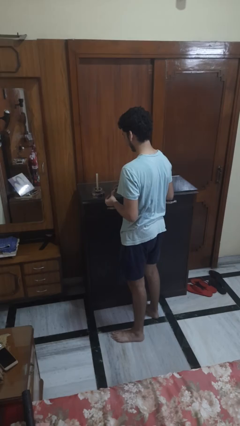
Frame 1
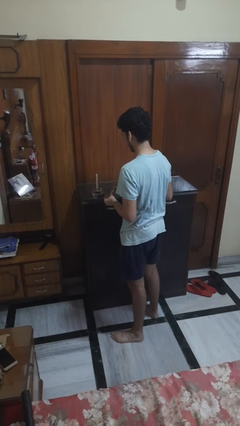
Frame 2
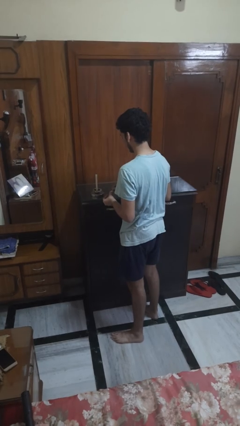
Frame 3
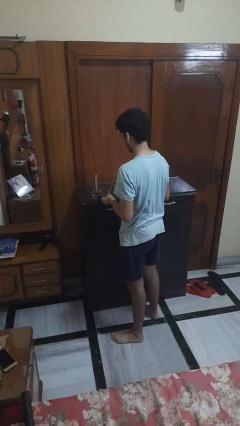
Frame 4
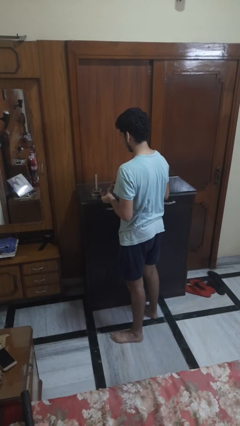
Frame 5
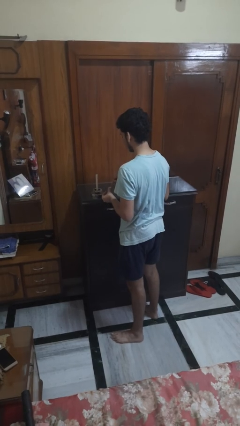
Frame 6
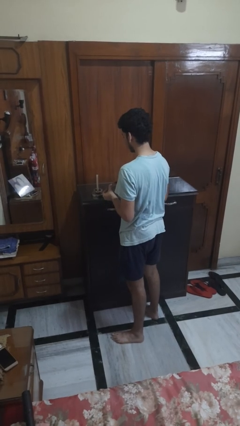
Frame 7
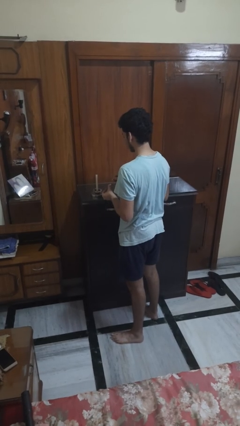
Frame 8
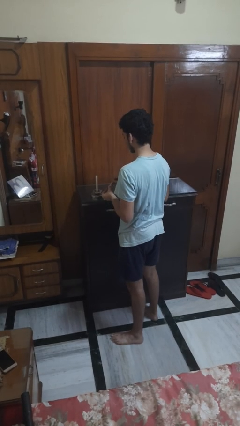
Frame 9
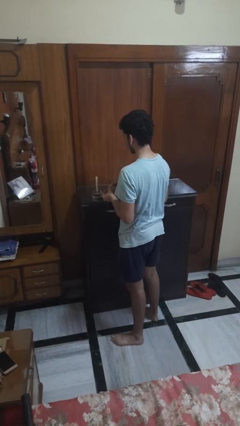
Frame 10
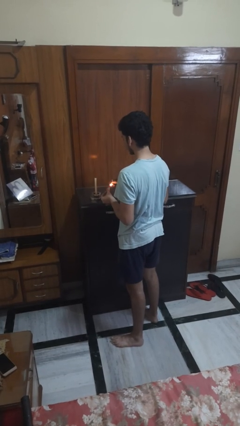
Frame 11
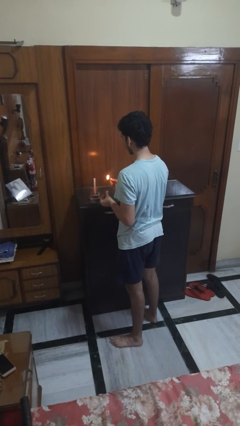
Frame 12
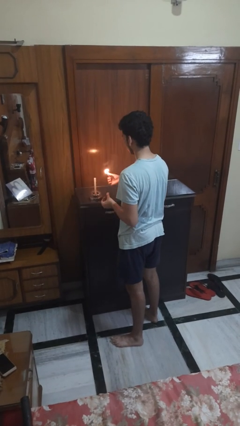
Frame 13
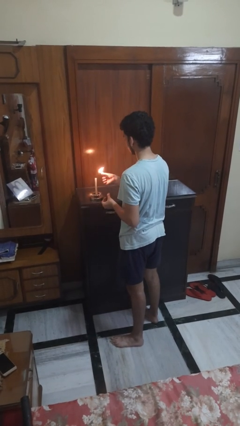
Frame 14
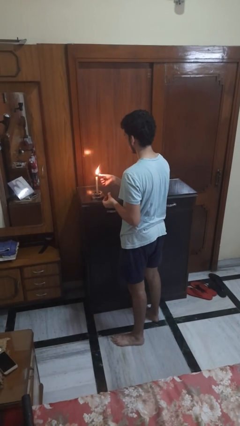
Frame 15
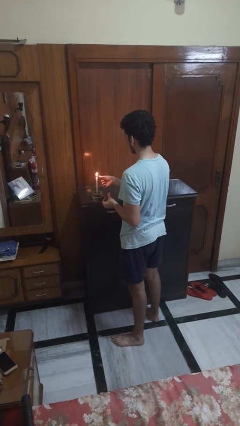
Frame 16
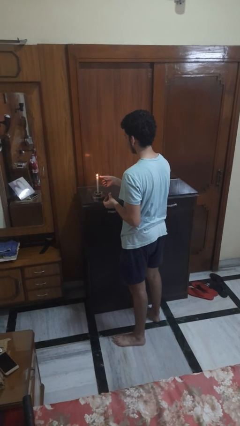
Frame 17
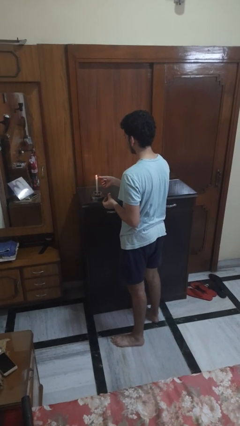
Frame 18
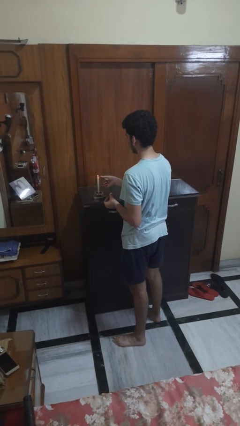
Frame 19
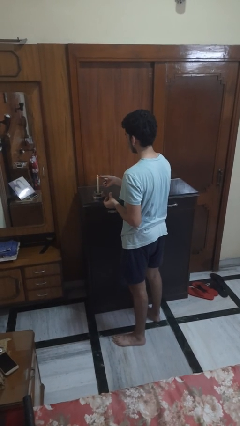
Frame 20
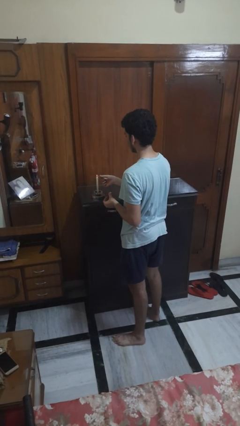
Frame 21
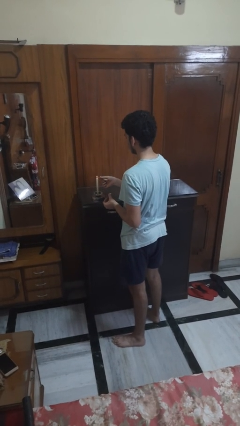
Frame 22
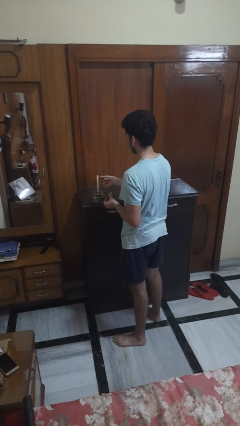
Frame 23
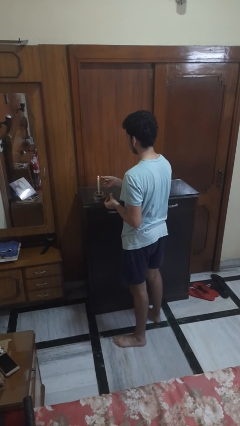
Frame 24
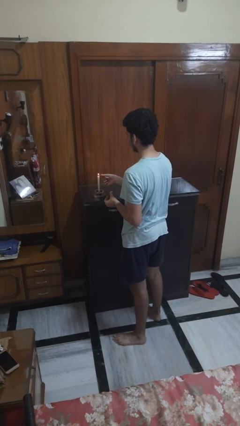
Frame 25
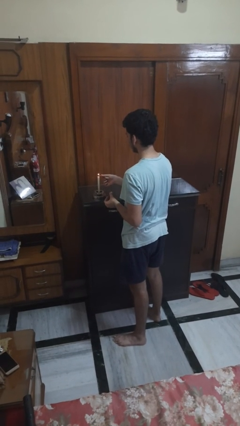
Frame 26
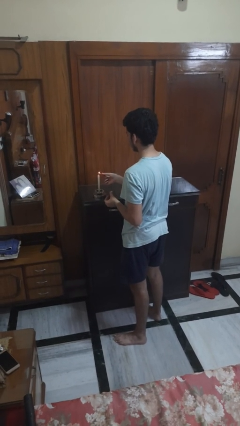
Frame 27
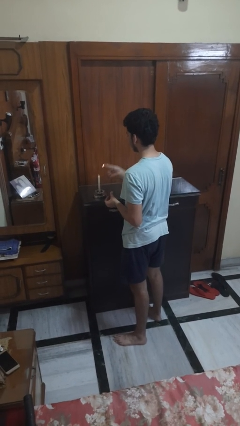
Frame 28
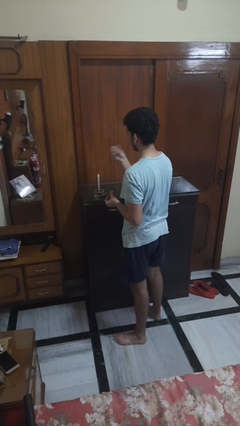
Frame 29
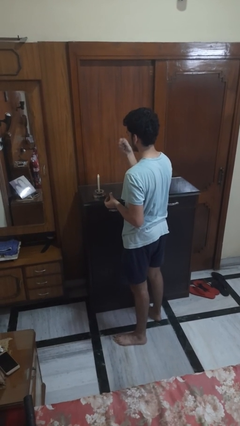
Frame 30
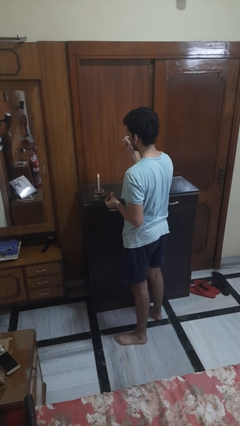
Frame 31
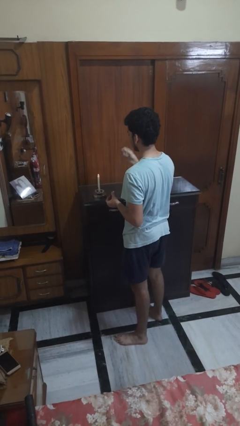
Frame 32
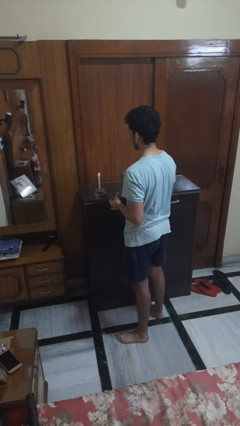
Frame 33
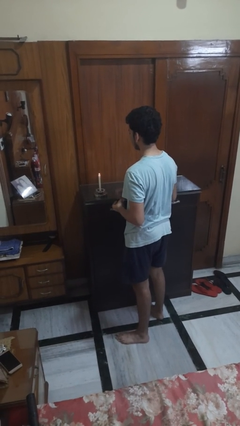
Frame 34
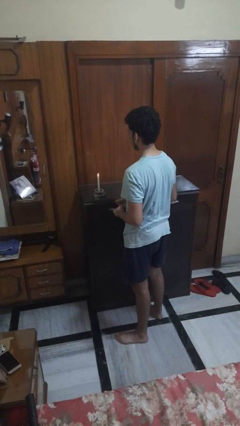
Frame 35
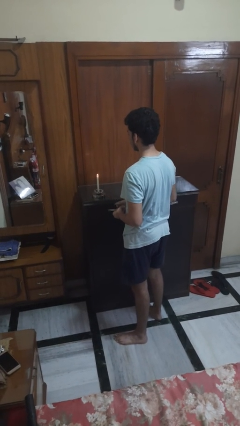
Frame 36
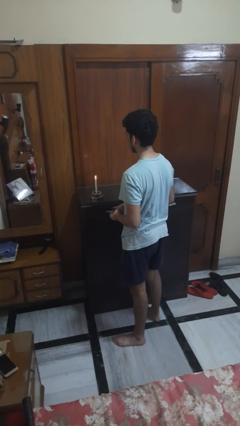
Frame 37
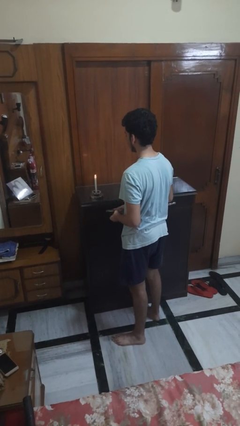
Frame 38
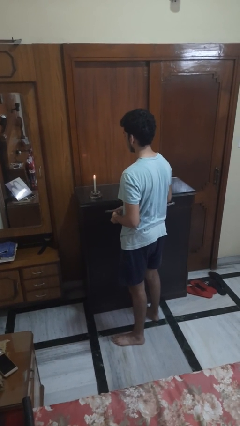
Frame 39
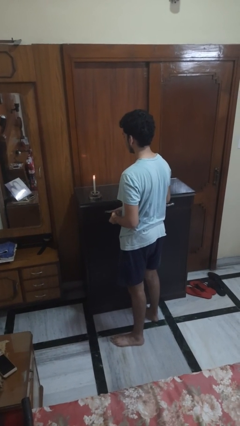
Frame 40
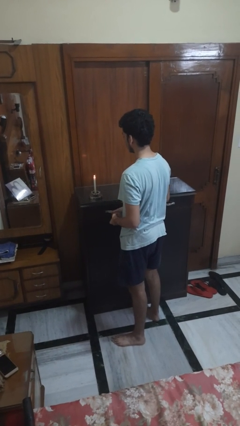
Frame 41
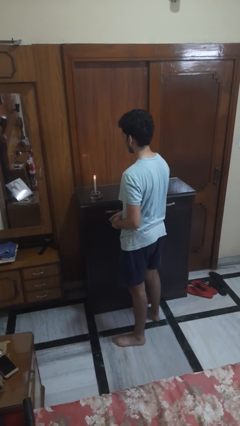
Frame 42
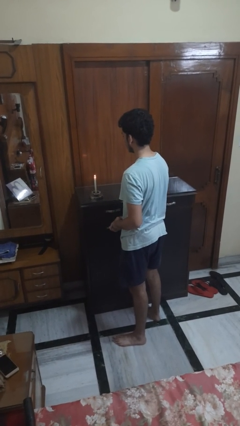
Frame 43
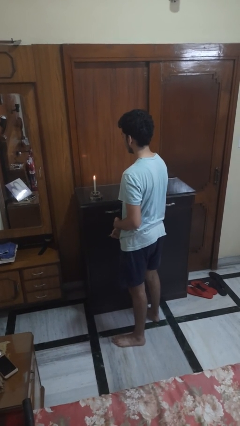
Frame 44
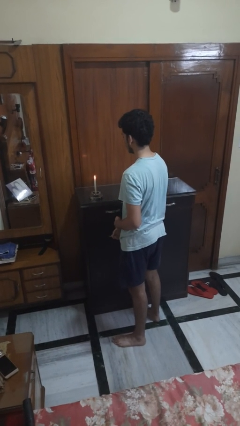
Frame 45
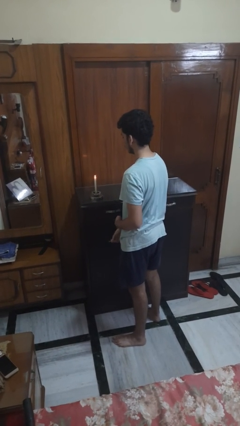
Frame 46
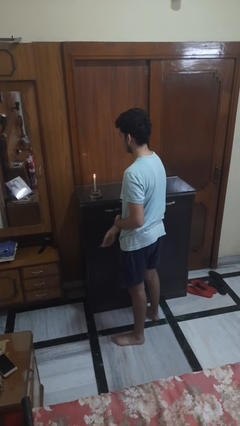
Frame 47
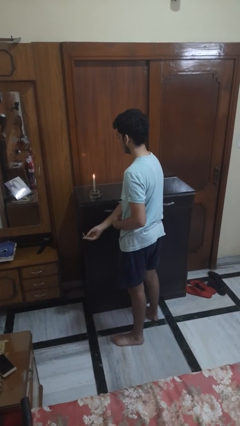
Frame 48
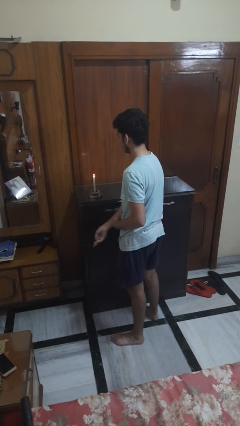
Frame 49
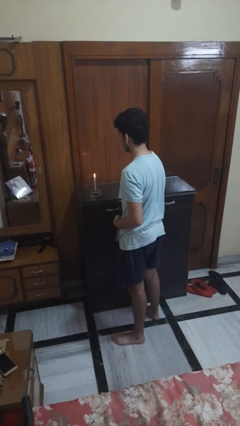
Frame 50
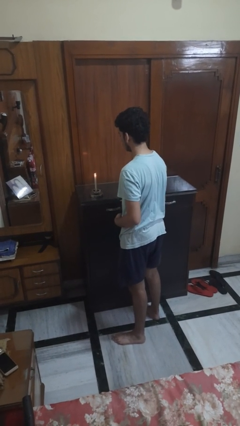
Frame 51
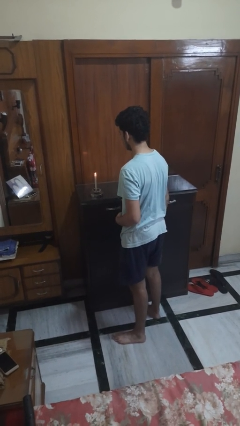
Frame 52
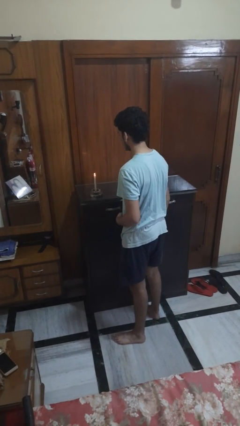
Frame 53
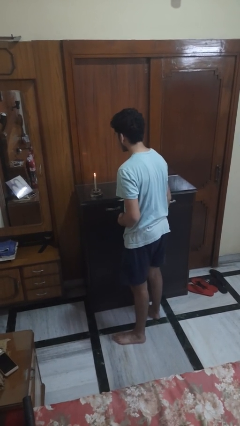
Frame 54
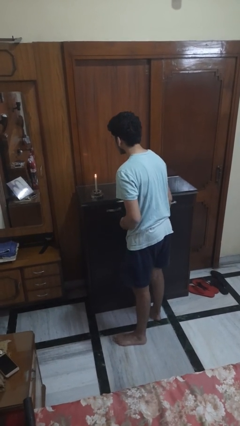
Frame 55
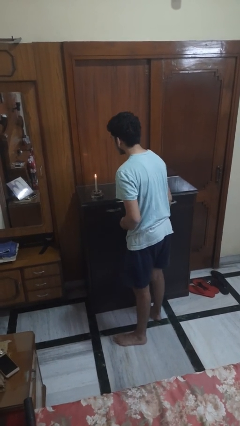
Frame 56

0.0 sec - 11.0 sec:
person lights candle

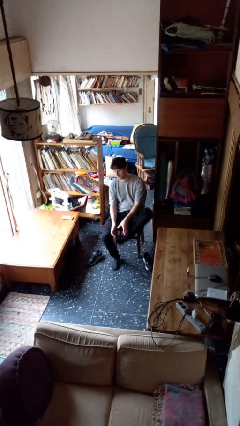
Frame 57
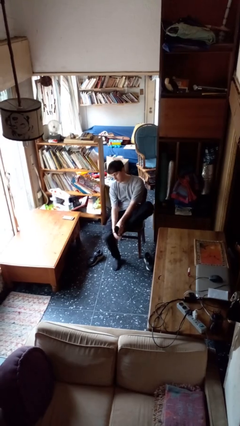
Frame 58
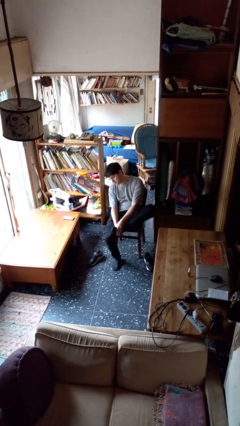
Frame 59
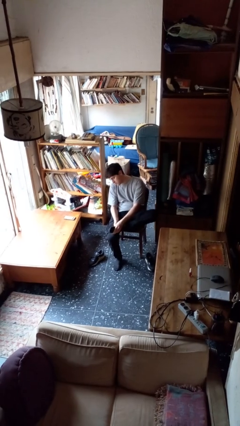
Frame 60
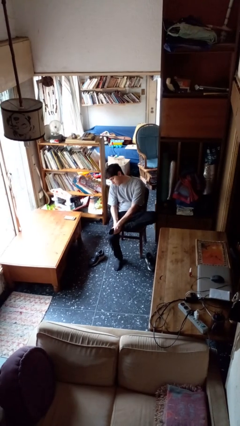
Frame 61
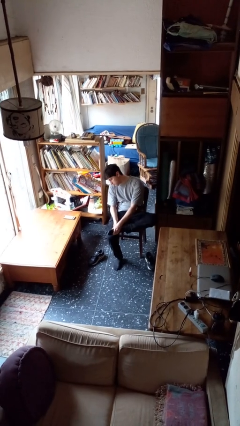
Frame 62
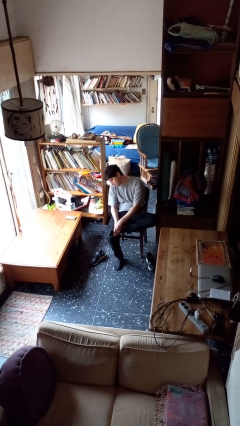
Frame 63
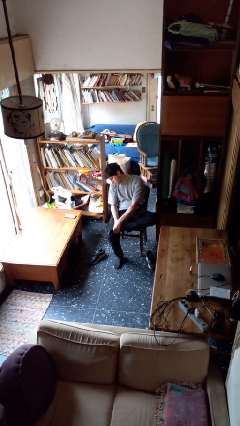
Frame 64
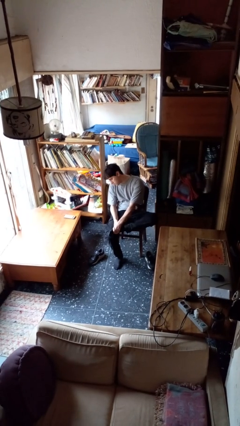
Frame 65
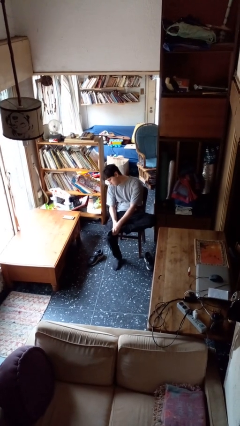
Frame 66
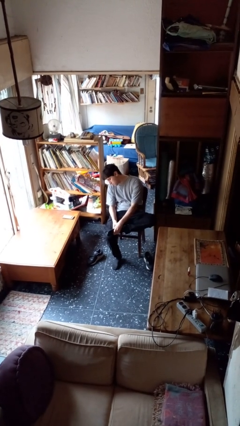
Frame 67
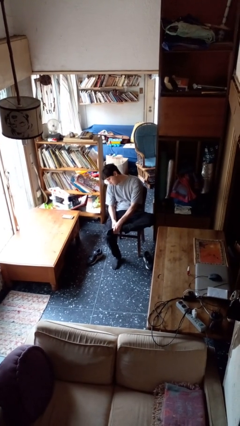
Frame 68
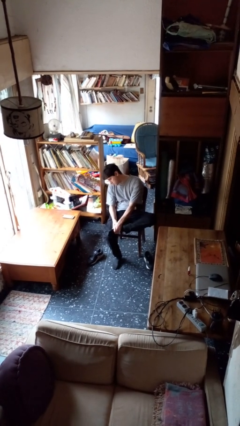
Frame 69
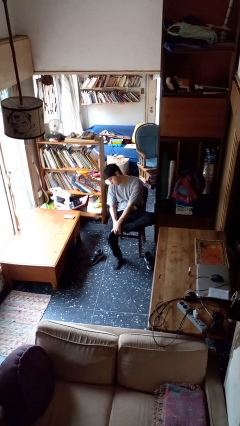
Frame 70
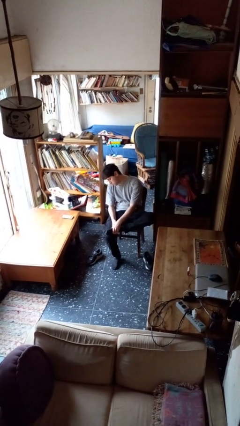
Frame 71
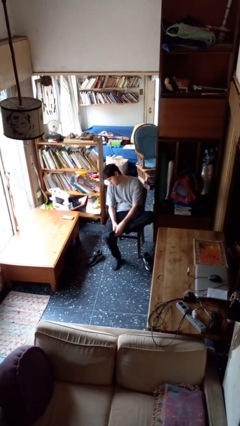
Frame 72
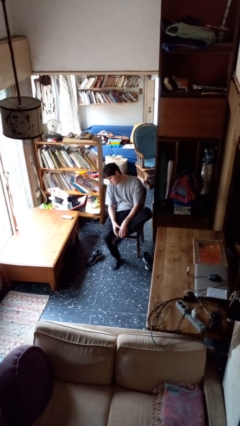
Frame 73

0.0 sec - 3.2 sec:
person rubs foot

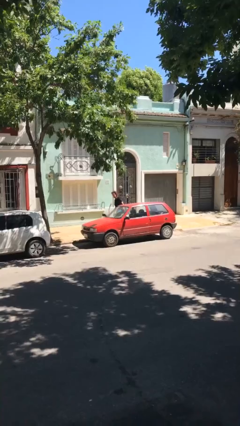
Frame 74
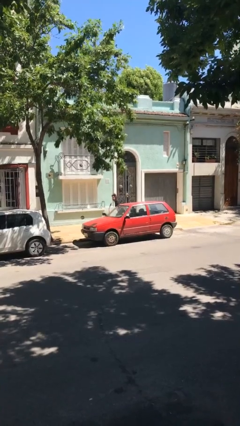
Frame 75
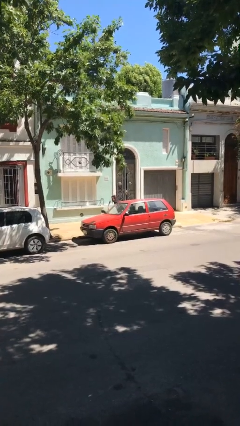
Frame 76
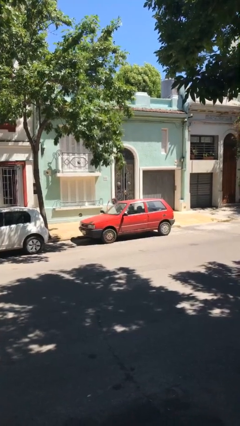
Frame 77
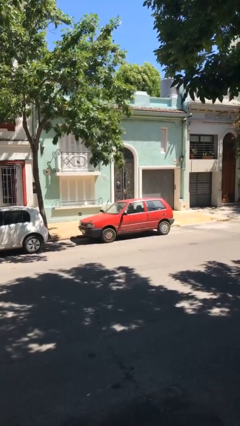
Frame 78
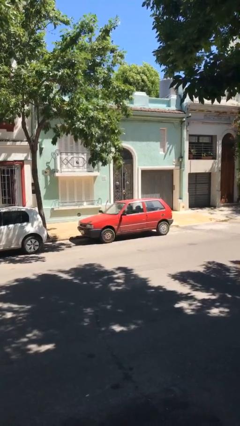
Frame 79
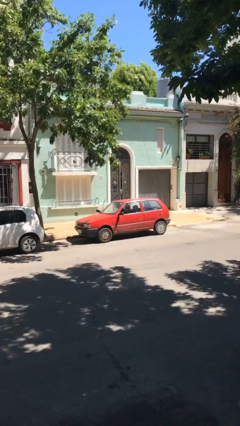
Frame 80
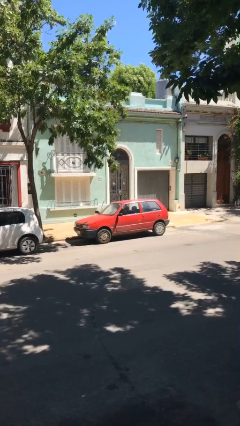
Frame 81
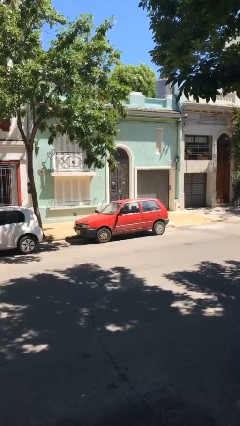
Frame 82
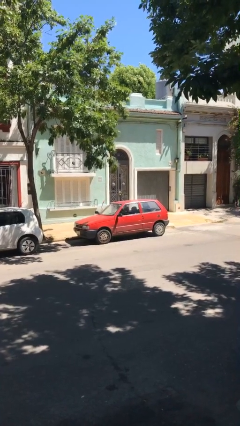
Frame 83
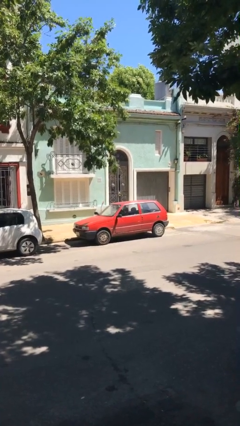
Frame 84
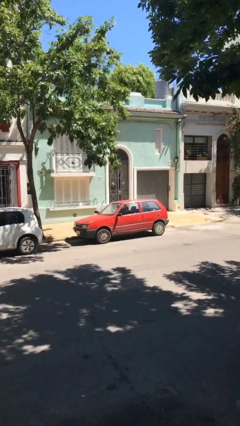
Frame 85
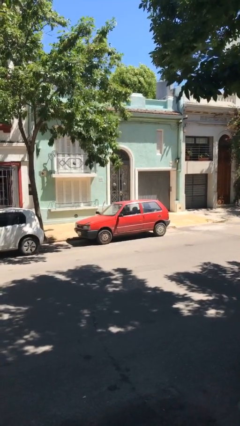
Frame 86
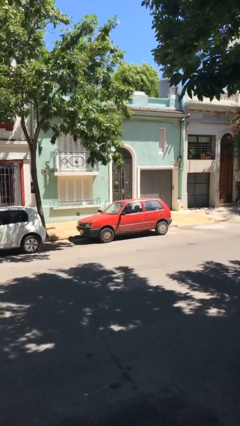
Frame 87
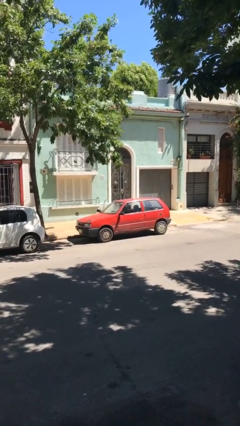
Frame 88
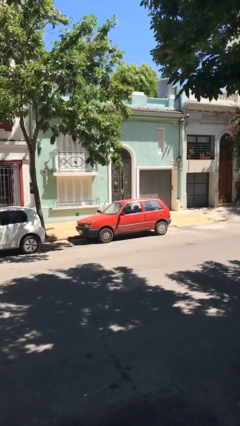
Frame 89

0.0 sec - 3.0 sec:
person enters car

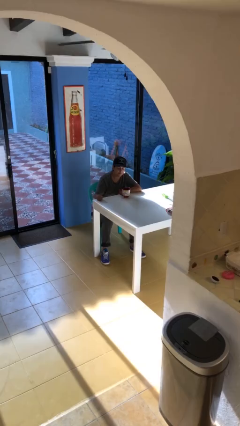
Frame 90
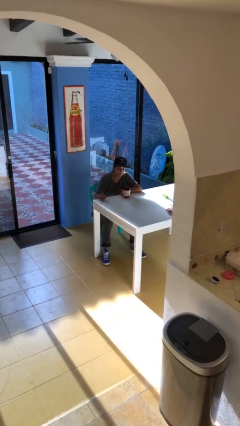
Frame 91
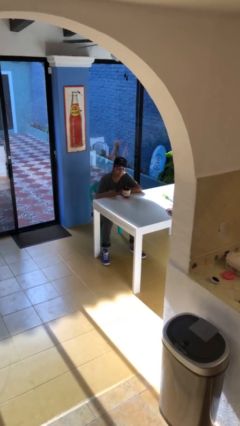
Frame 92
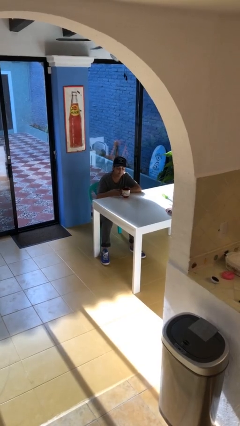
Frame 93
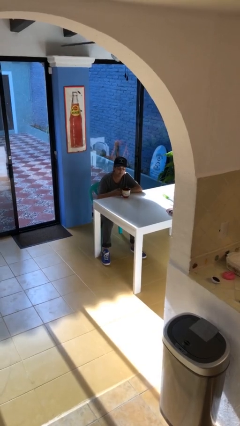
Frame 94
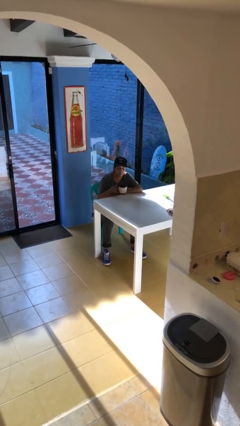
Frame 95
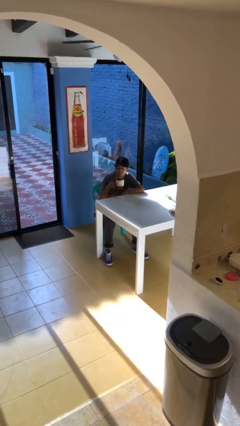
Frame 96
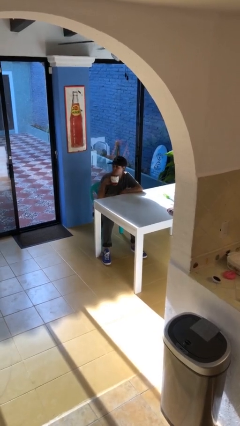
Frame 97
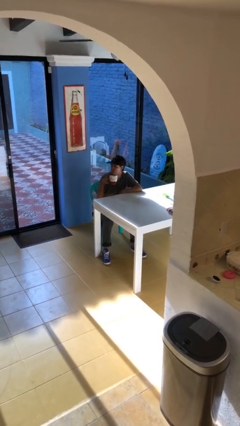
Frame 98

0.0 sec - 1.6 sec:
person picks up object from table
